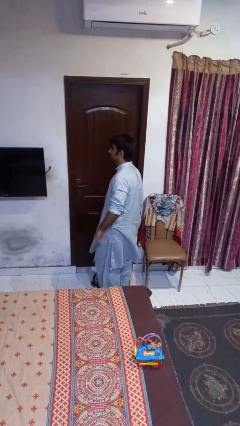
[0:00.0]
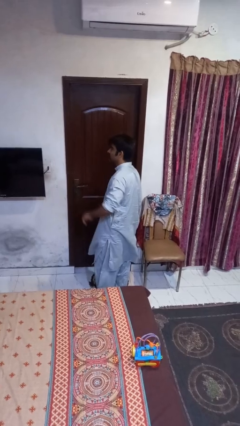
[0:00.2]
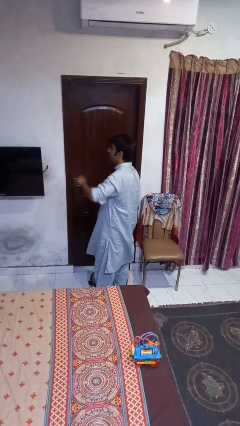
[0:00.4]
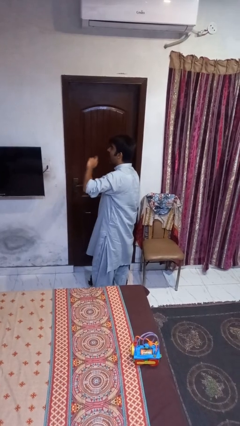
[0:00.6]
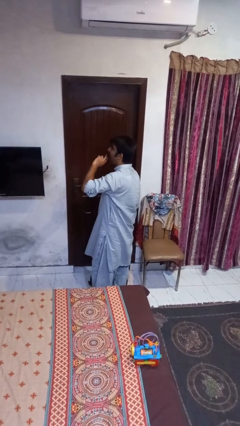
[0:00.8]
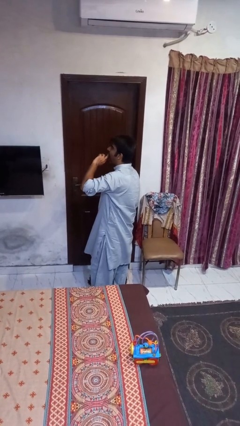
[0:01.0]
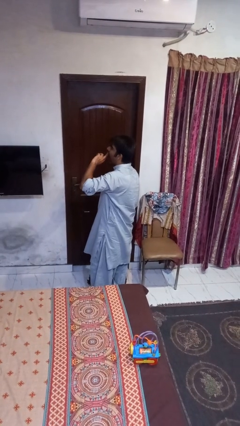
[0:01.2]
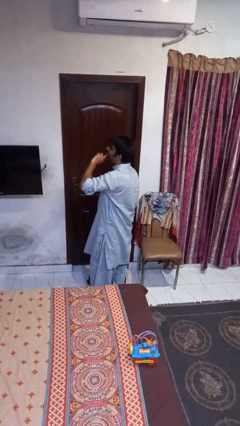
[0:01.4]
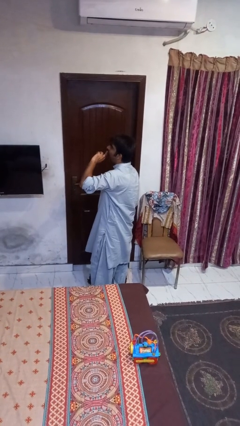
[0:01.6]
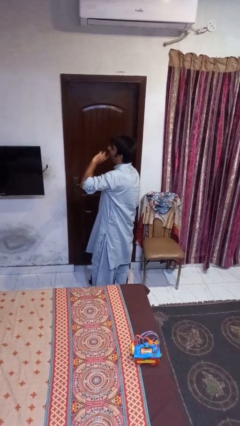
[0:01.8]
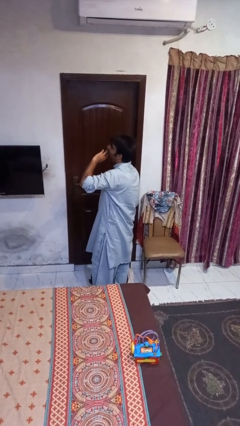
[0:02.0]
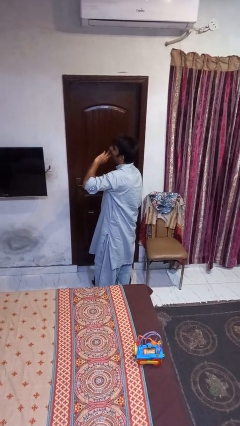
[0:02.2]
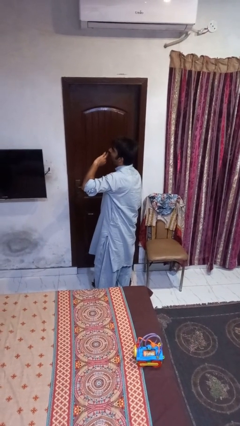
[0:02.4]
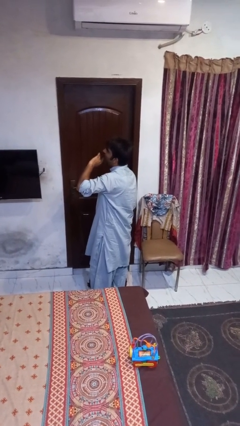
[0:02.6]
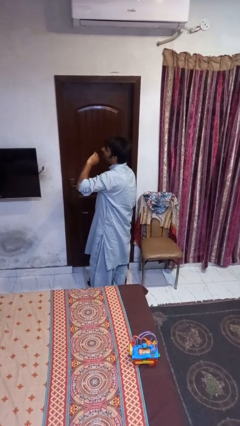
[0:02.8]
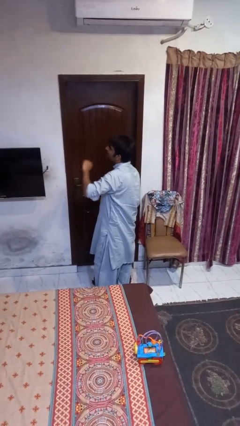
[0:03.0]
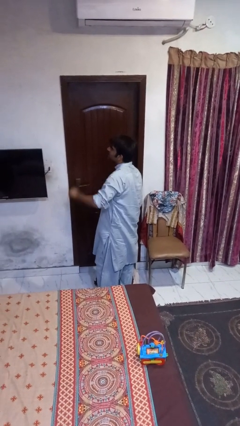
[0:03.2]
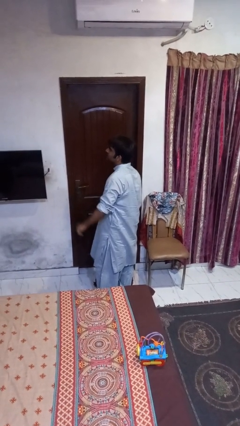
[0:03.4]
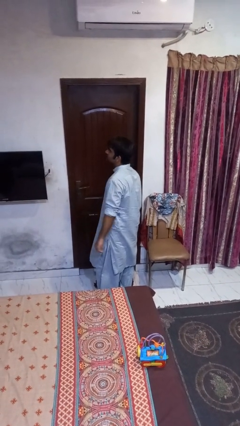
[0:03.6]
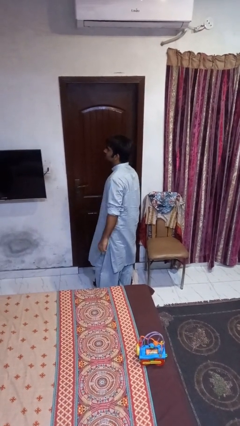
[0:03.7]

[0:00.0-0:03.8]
person yawns

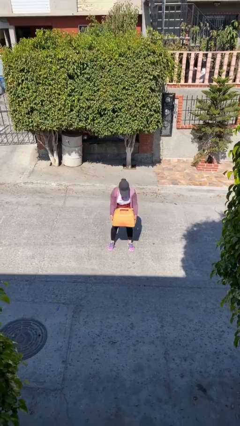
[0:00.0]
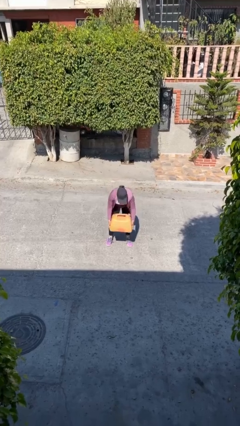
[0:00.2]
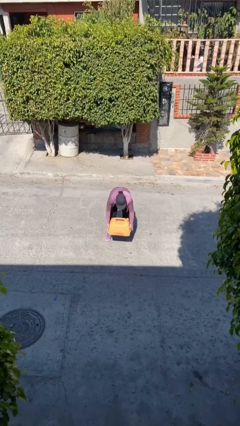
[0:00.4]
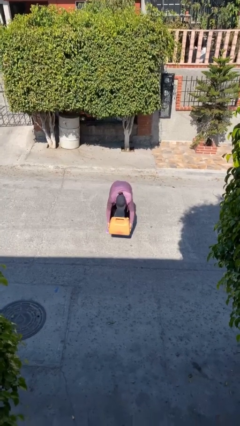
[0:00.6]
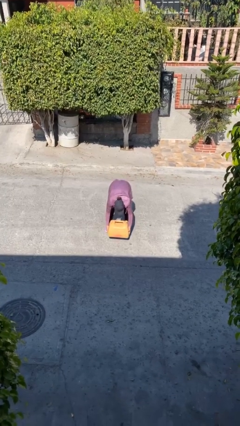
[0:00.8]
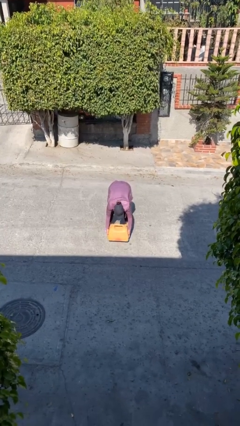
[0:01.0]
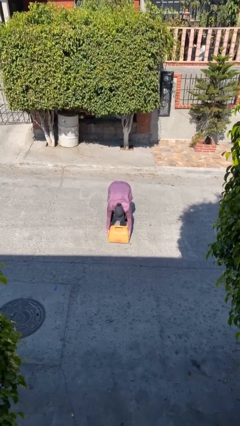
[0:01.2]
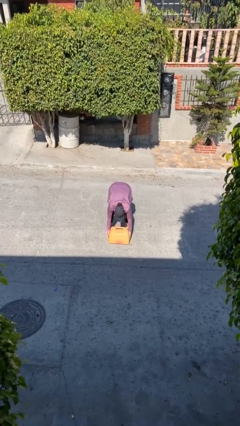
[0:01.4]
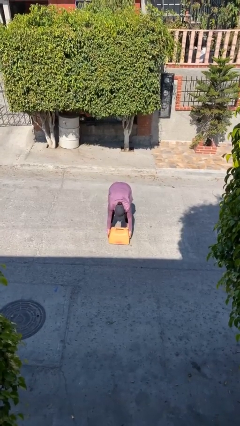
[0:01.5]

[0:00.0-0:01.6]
person puts down object on floor

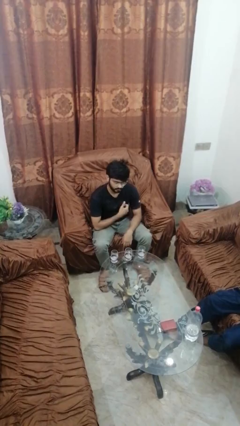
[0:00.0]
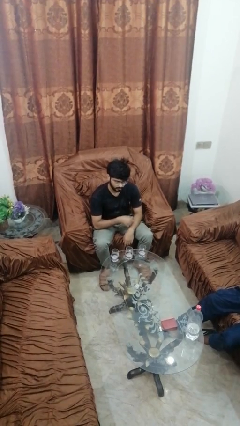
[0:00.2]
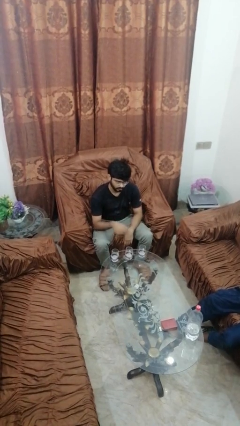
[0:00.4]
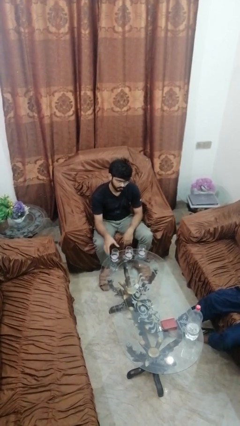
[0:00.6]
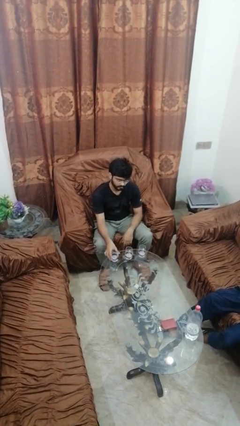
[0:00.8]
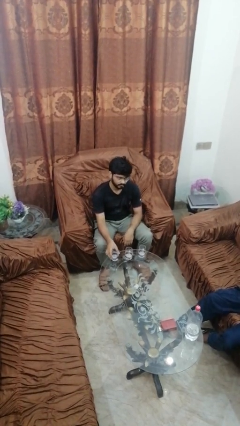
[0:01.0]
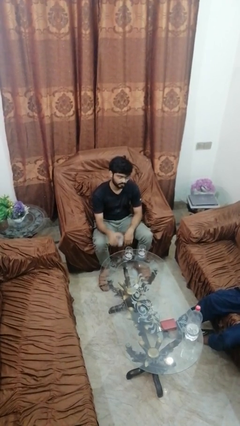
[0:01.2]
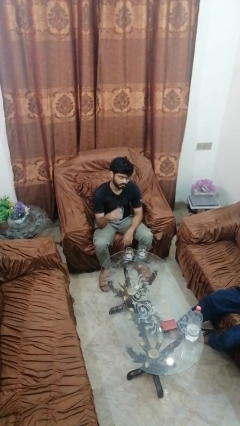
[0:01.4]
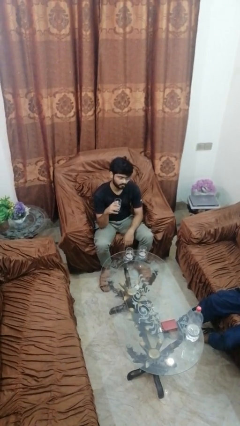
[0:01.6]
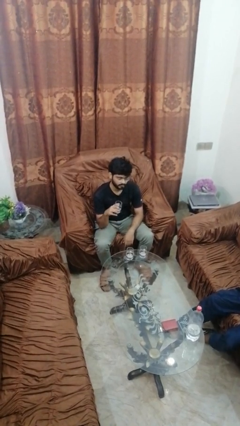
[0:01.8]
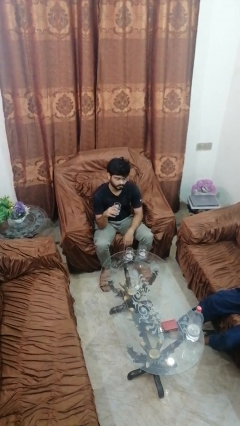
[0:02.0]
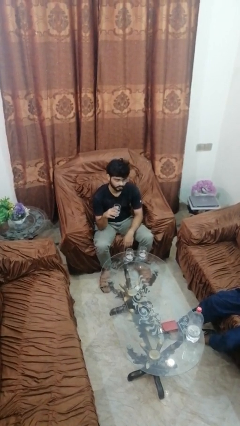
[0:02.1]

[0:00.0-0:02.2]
person picks up object from table

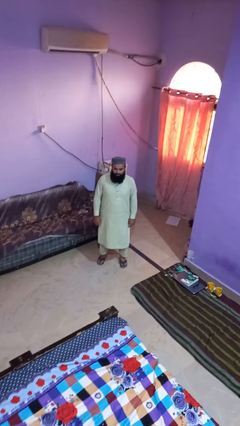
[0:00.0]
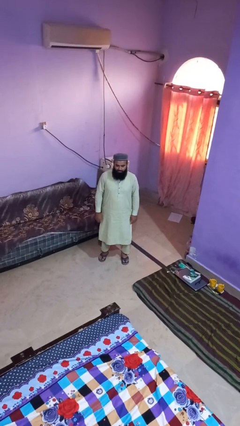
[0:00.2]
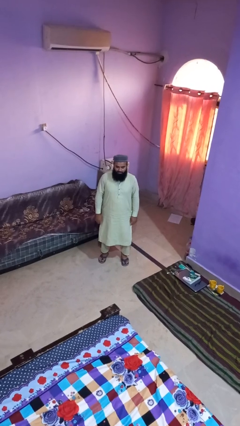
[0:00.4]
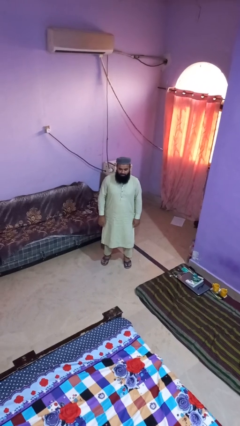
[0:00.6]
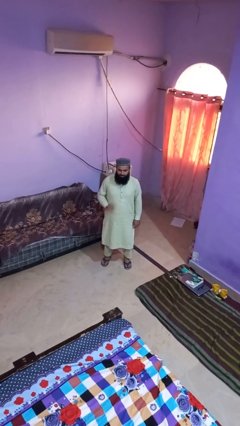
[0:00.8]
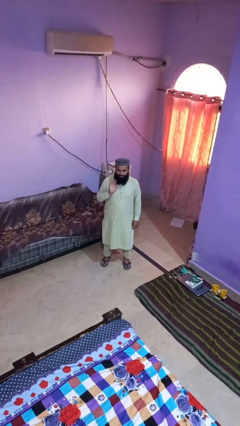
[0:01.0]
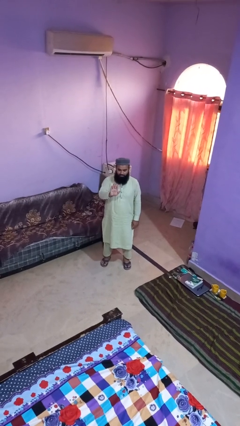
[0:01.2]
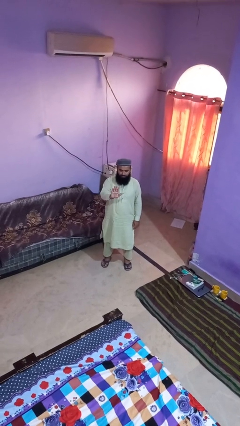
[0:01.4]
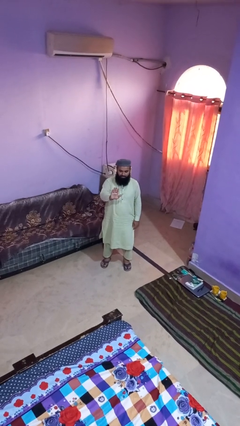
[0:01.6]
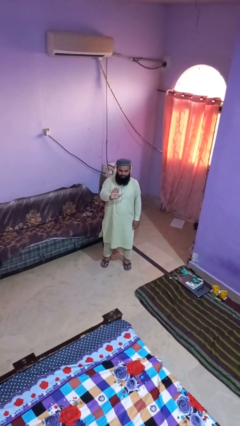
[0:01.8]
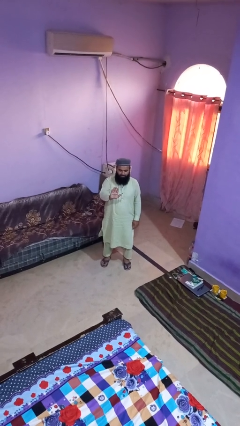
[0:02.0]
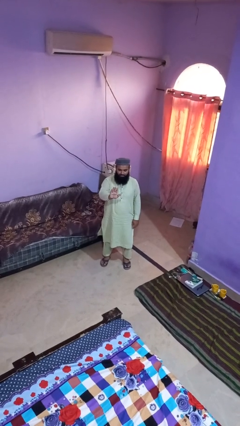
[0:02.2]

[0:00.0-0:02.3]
person gestures stop

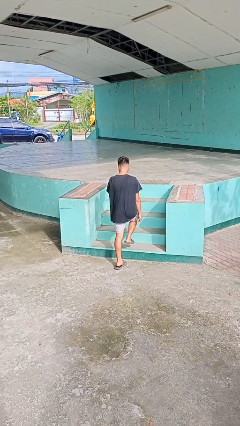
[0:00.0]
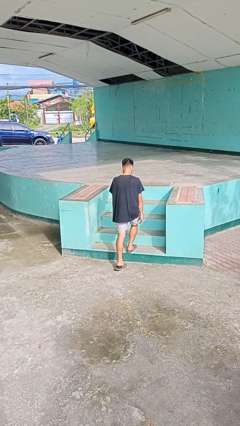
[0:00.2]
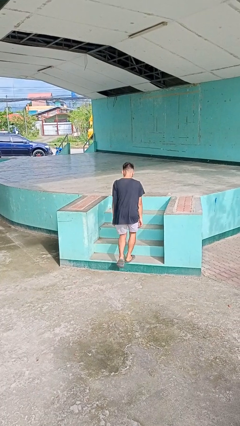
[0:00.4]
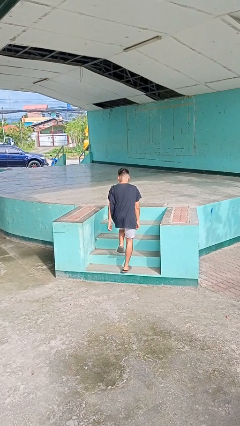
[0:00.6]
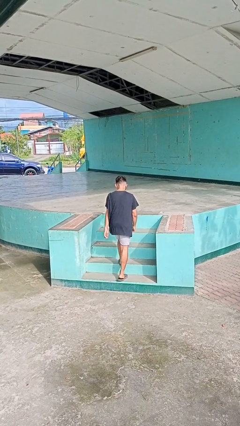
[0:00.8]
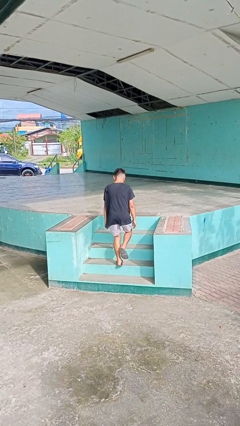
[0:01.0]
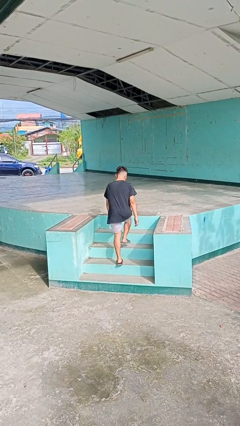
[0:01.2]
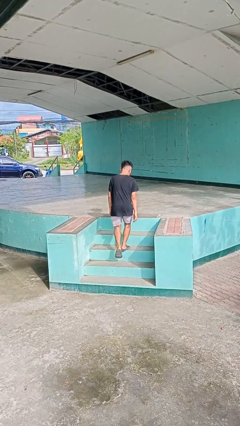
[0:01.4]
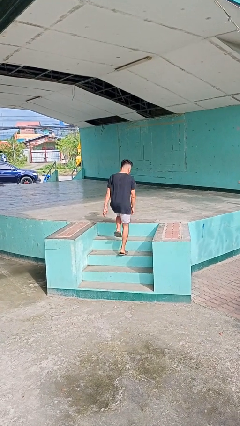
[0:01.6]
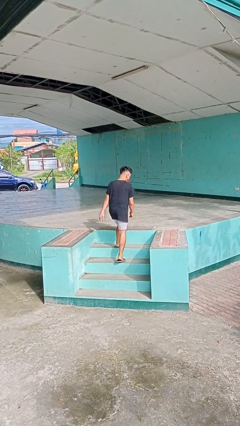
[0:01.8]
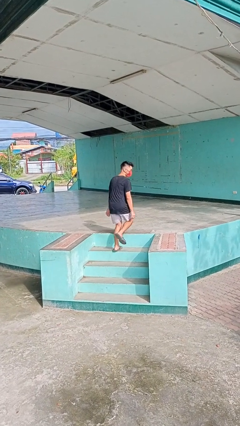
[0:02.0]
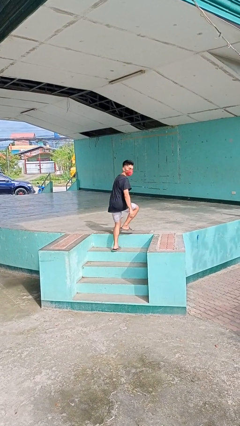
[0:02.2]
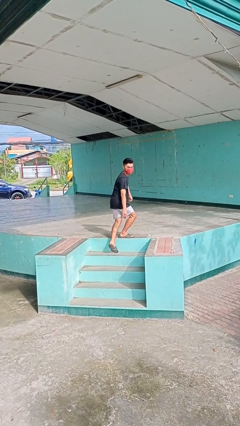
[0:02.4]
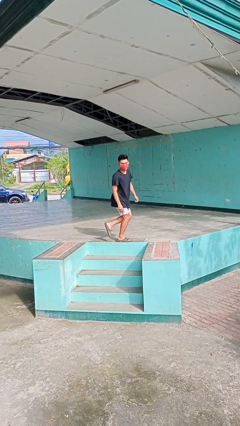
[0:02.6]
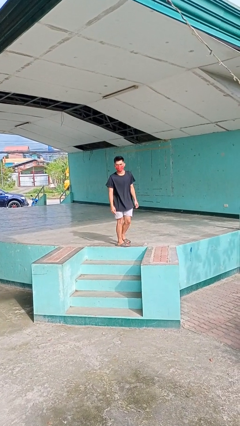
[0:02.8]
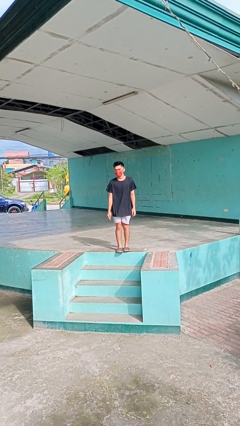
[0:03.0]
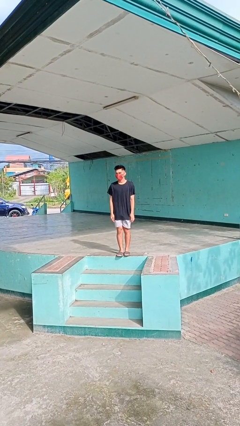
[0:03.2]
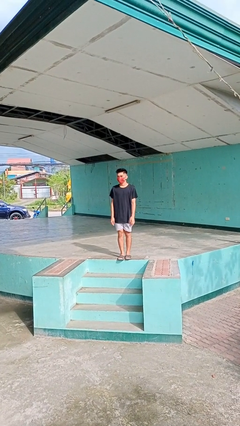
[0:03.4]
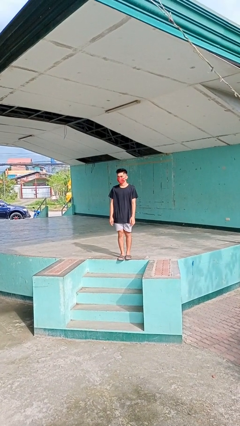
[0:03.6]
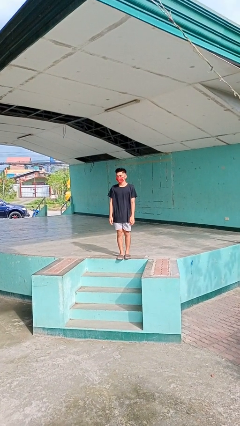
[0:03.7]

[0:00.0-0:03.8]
person climbs up stairs

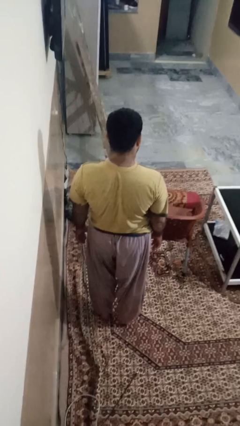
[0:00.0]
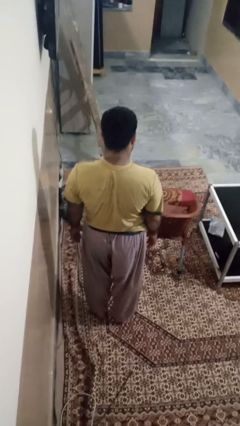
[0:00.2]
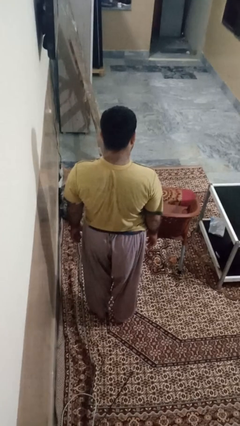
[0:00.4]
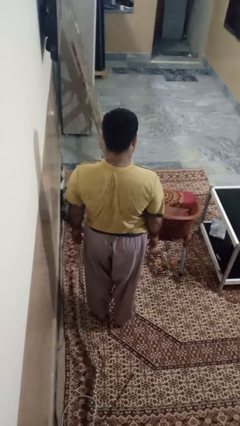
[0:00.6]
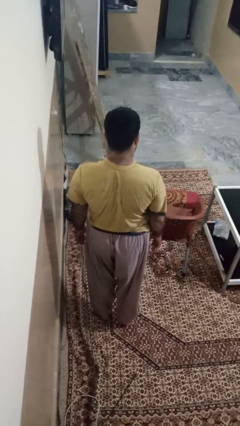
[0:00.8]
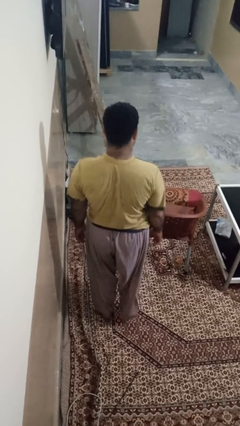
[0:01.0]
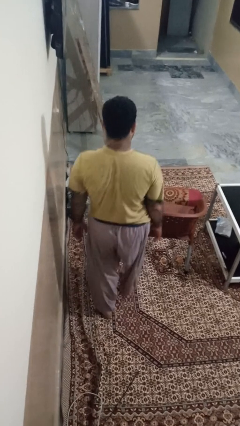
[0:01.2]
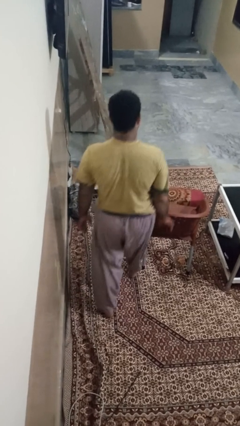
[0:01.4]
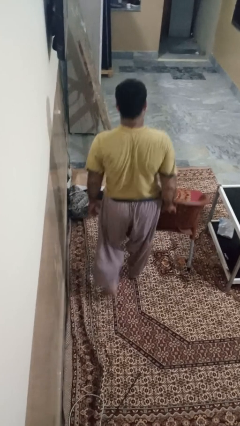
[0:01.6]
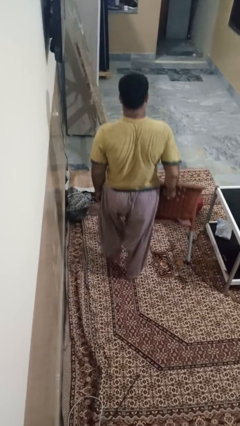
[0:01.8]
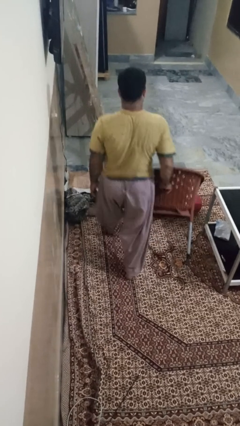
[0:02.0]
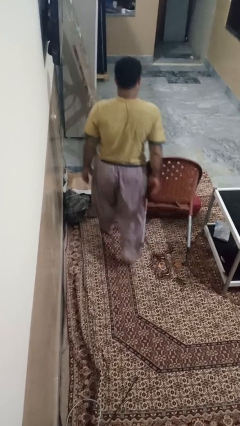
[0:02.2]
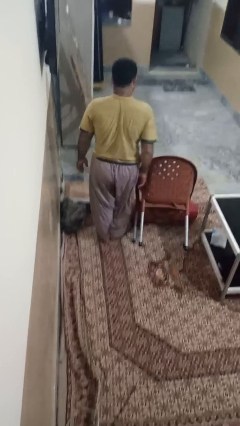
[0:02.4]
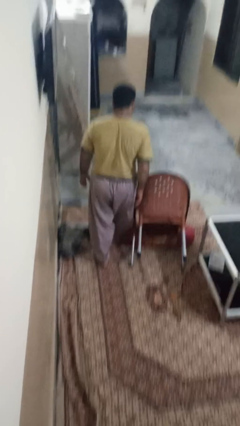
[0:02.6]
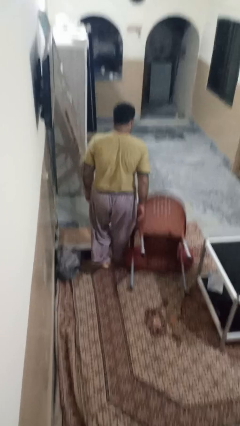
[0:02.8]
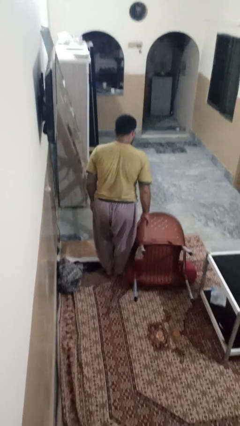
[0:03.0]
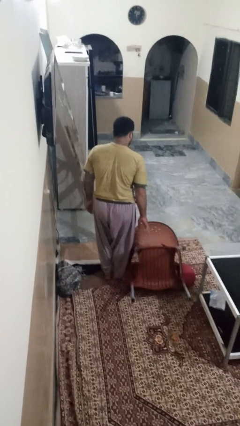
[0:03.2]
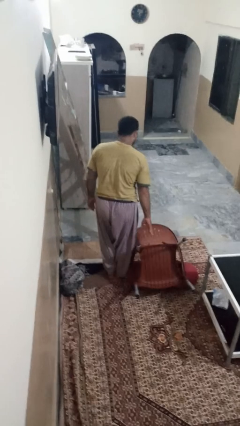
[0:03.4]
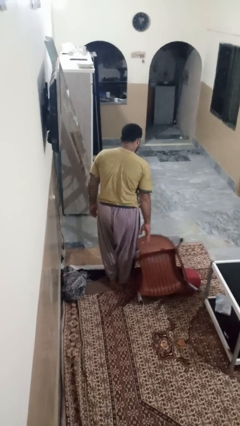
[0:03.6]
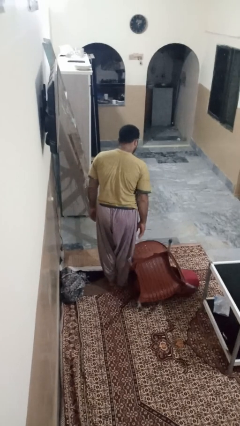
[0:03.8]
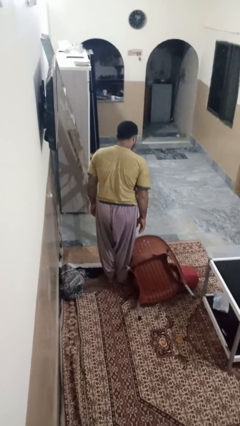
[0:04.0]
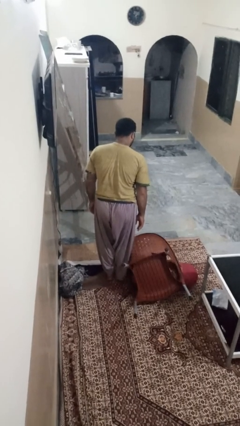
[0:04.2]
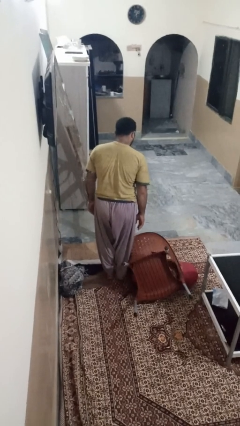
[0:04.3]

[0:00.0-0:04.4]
person knocks over furniture
